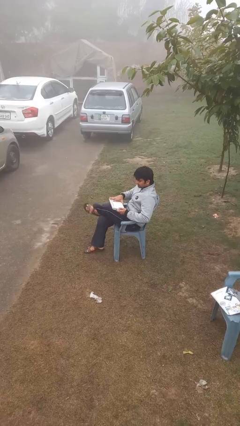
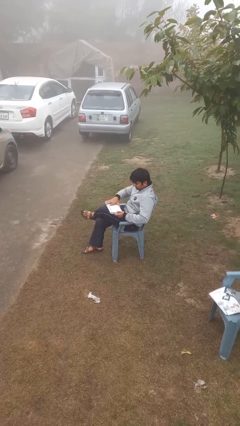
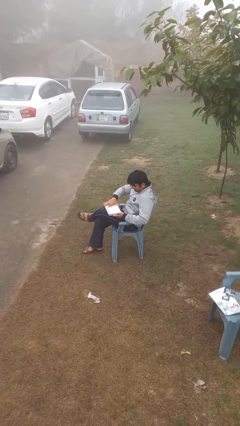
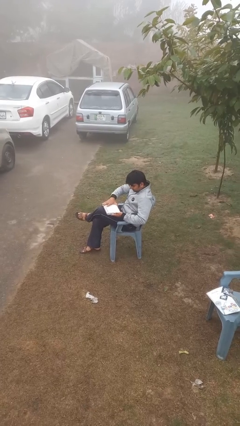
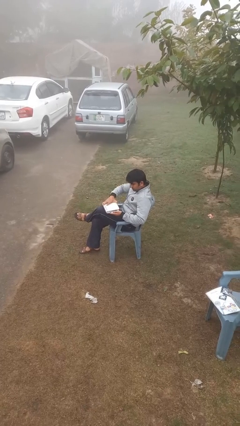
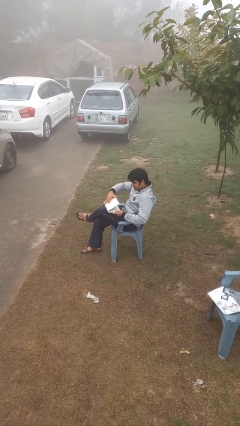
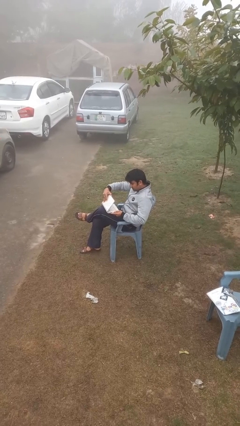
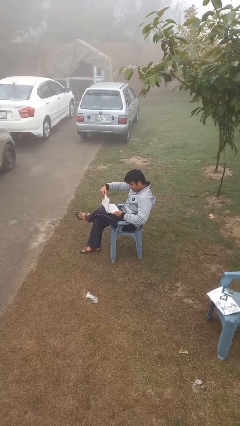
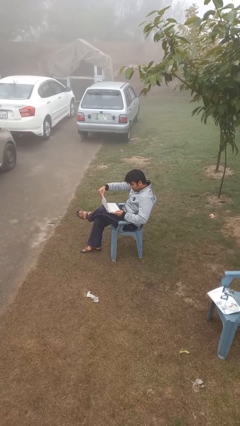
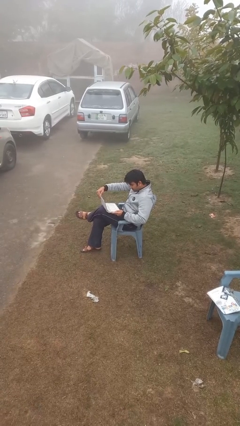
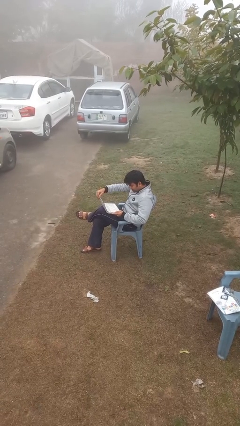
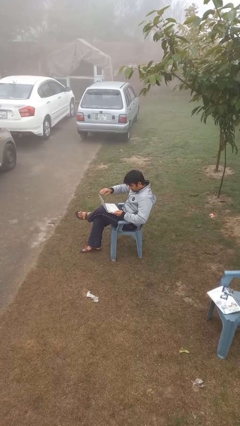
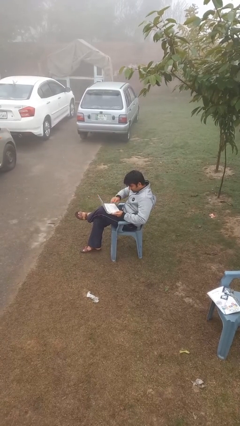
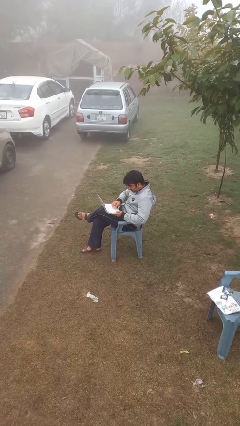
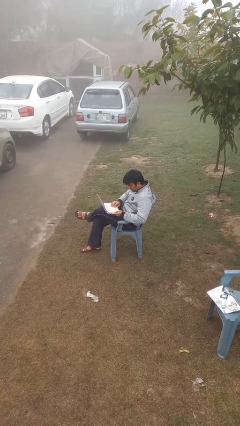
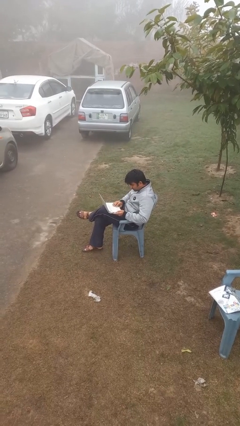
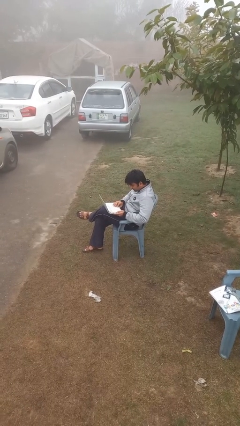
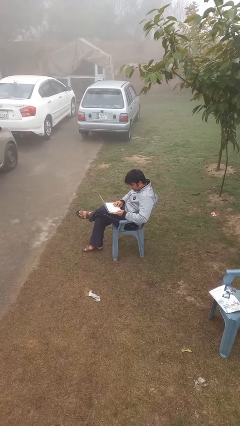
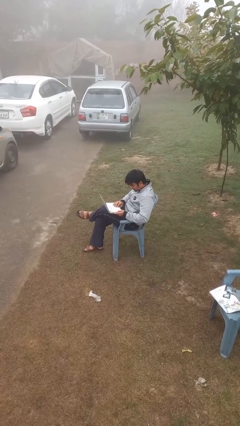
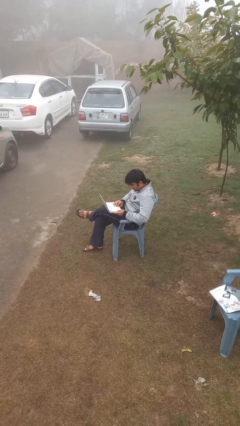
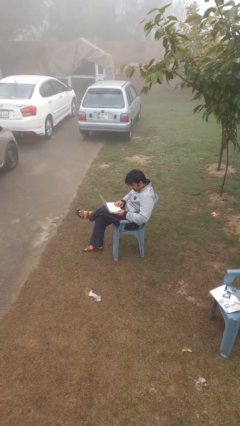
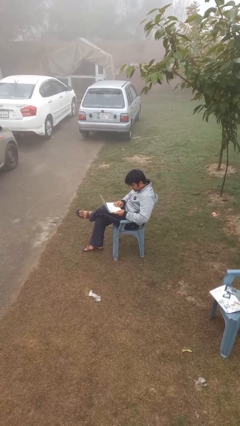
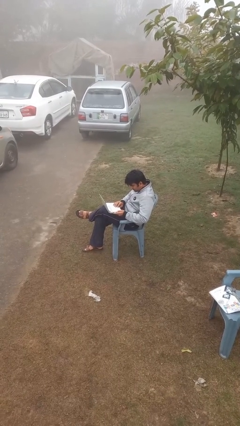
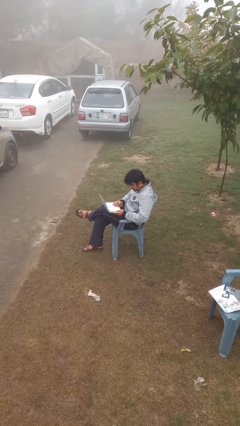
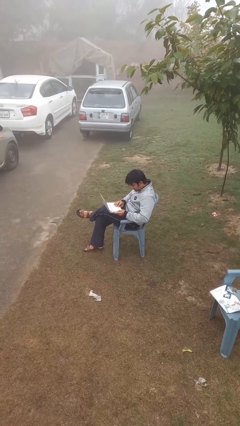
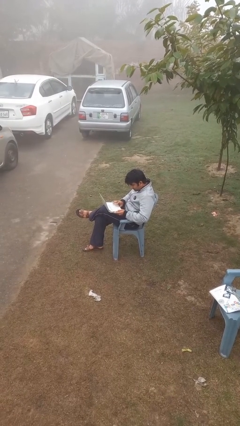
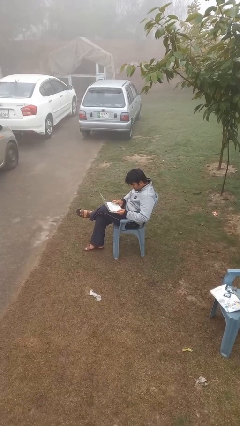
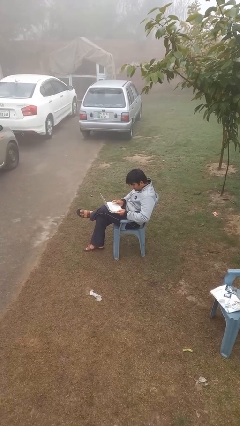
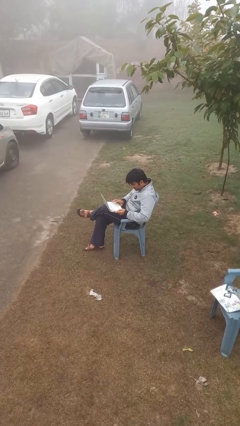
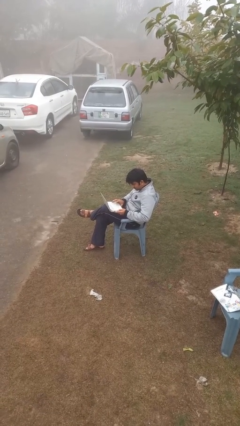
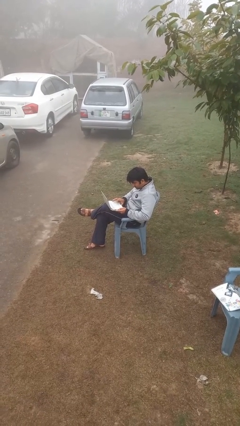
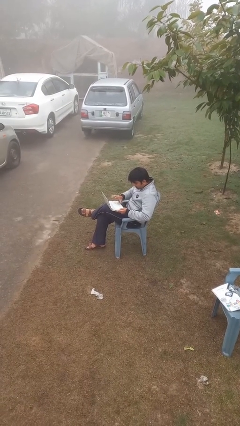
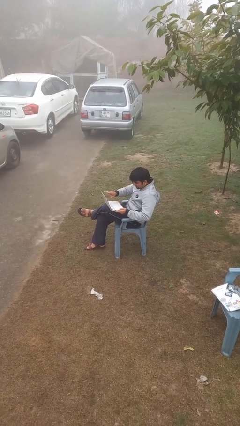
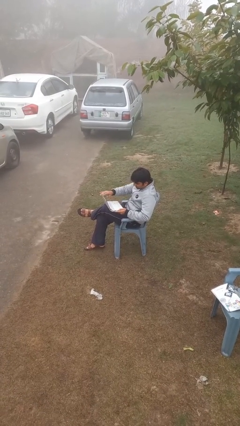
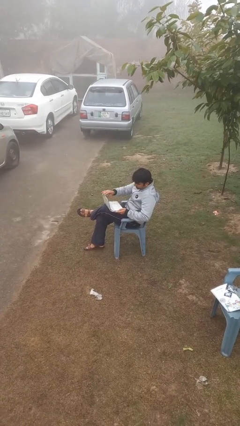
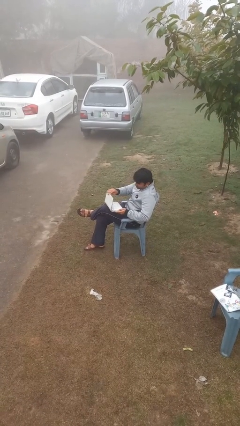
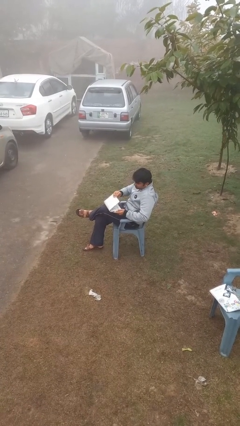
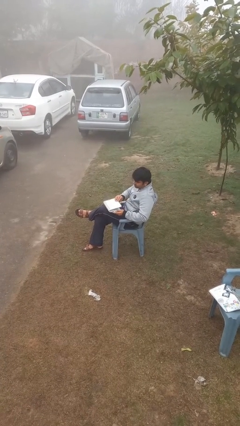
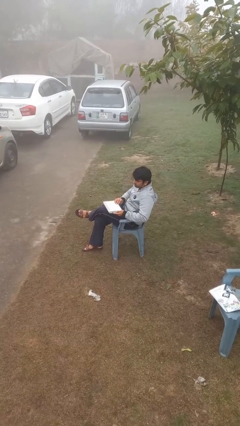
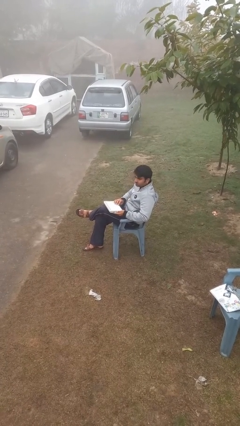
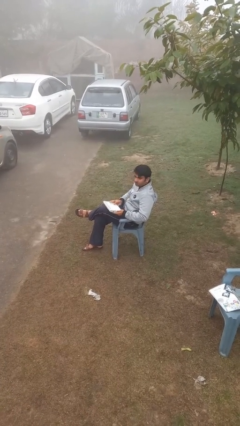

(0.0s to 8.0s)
person interacts with laptop

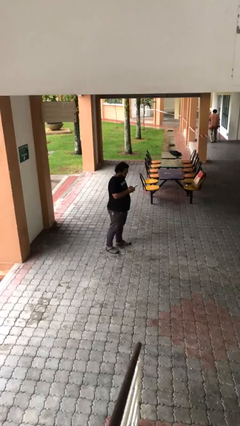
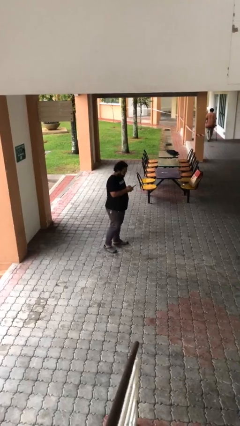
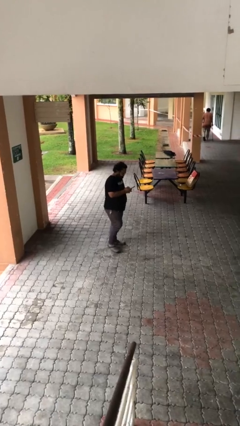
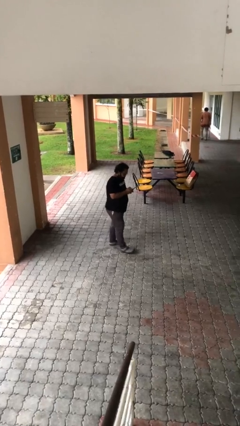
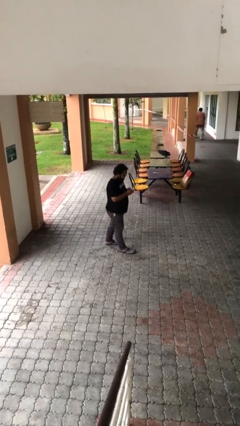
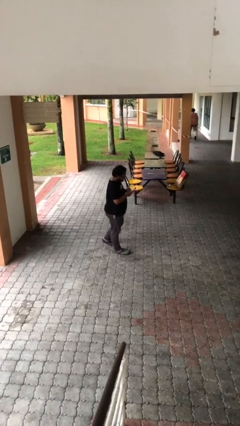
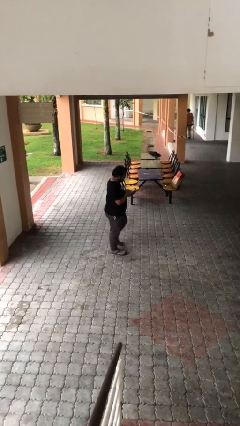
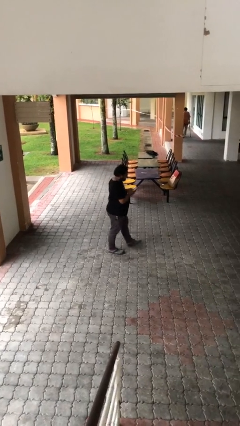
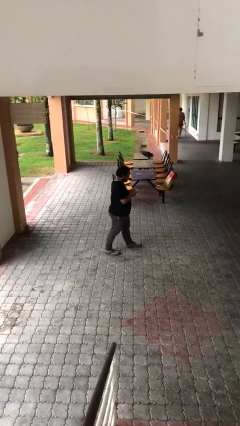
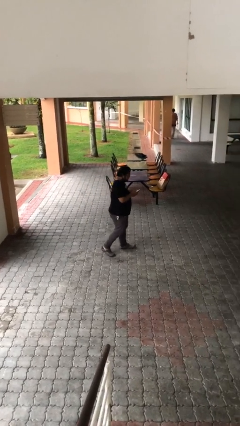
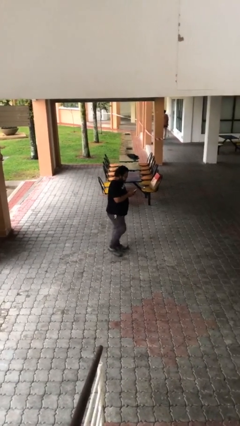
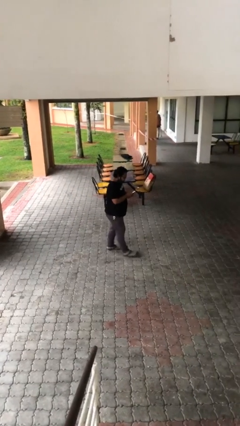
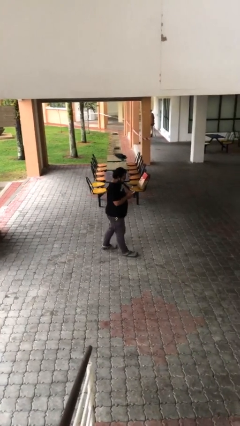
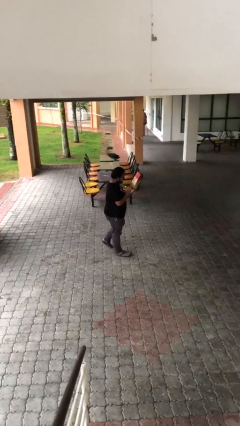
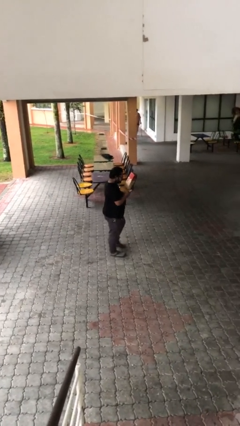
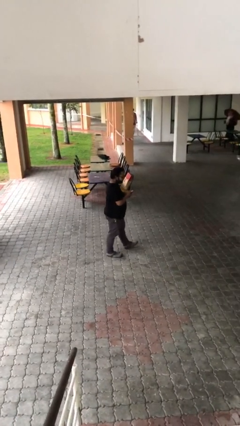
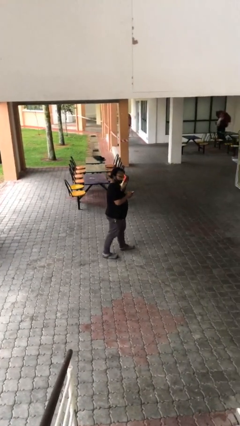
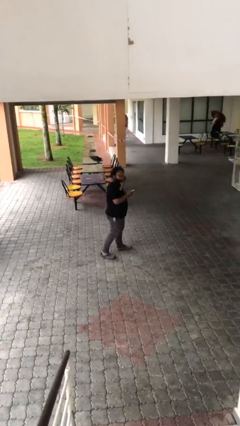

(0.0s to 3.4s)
person texts on phone

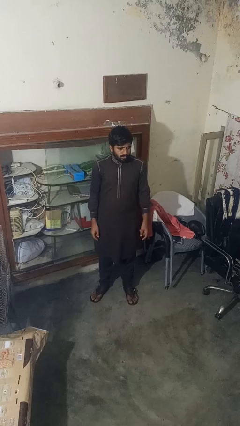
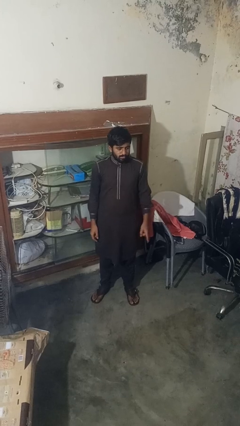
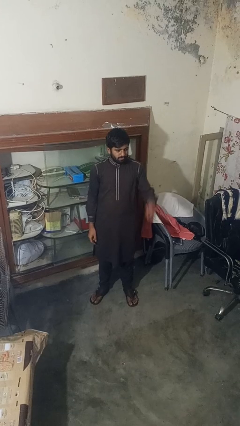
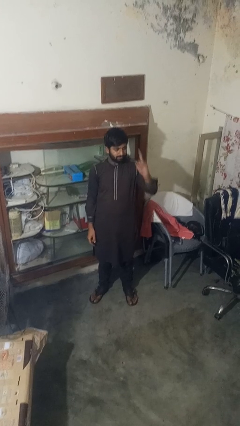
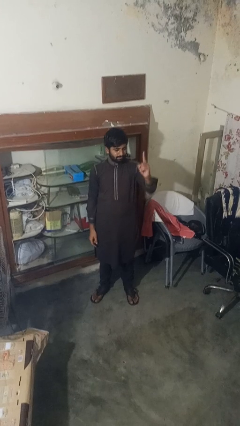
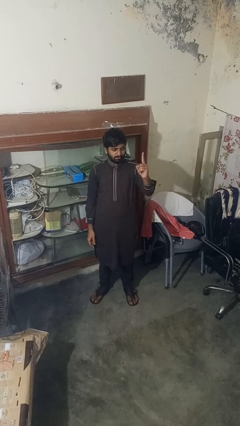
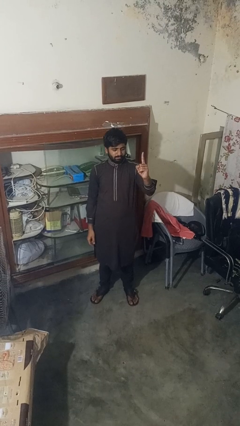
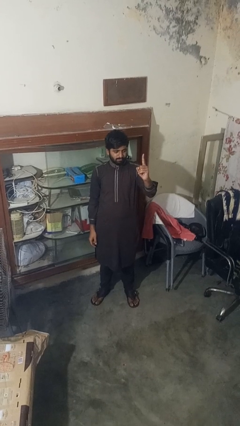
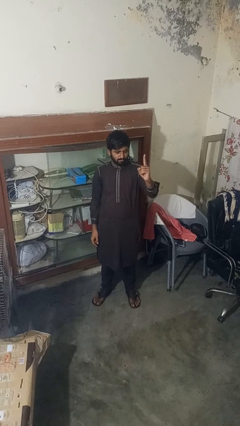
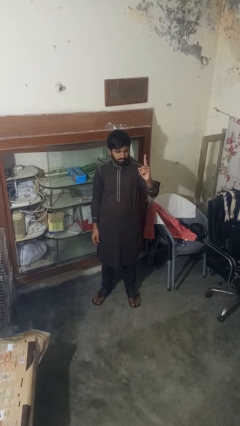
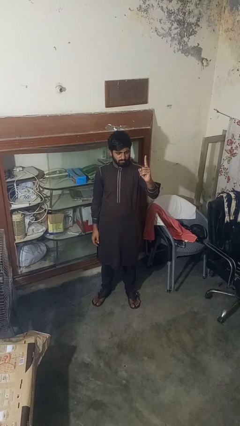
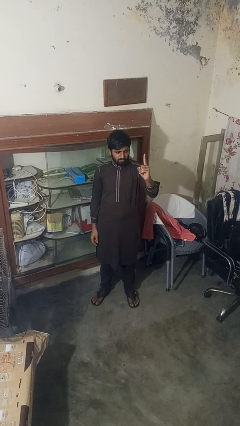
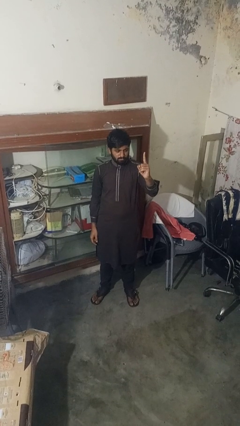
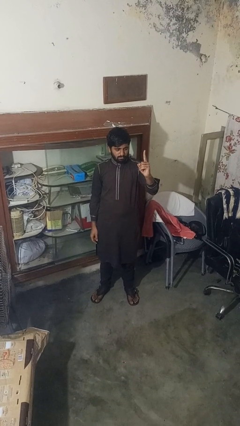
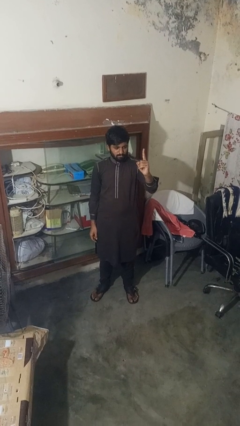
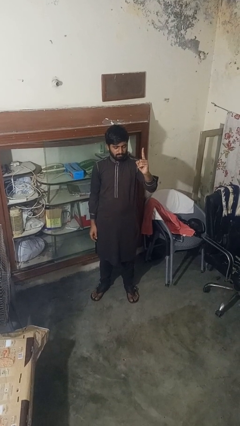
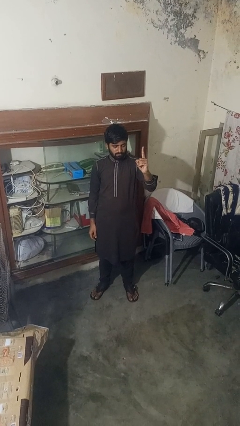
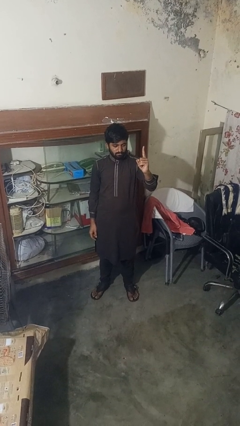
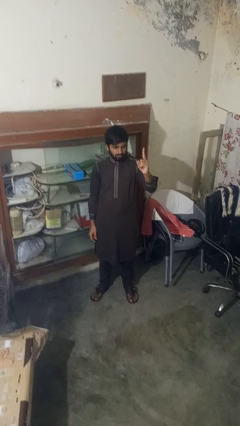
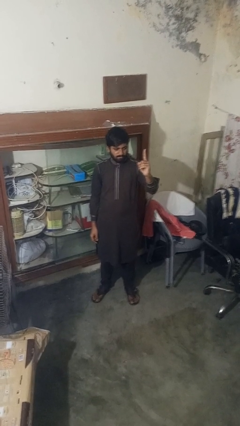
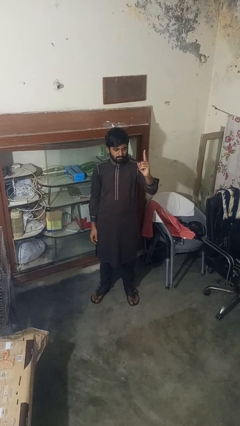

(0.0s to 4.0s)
person gestures number one

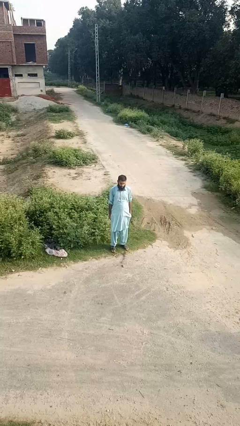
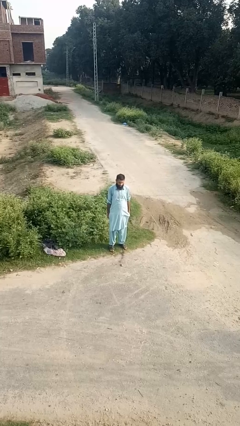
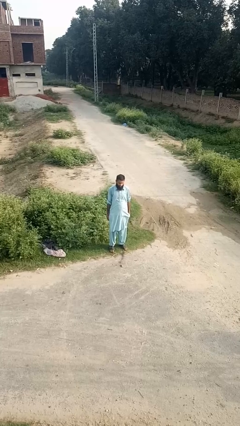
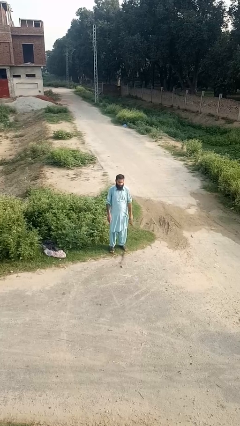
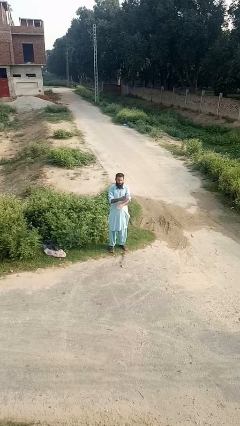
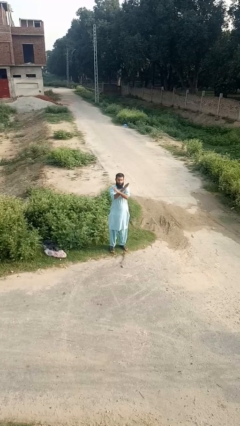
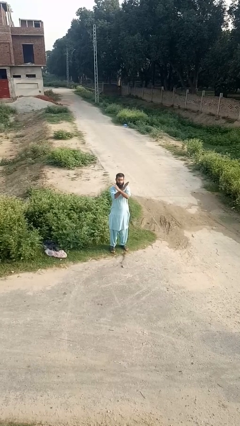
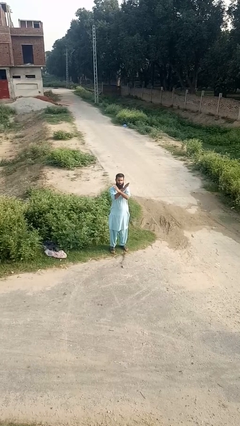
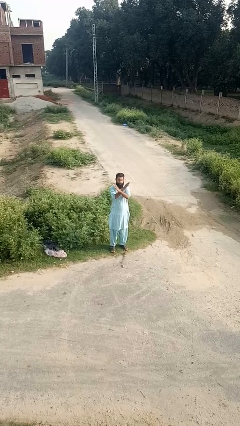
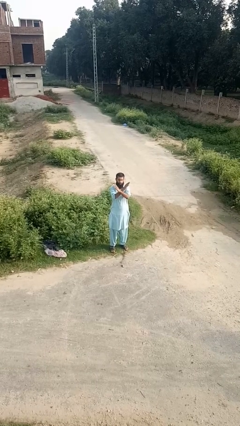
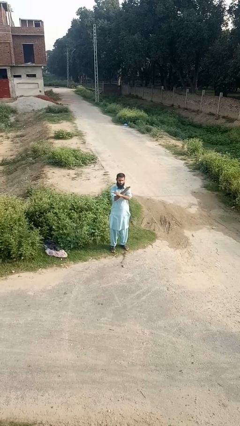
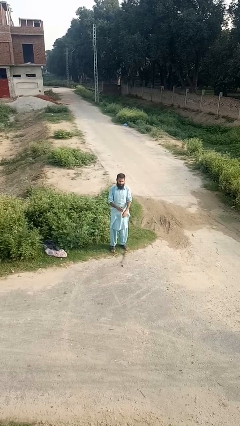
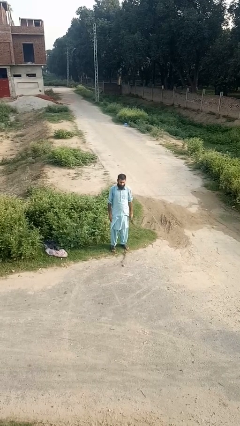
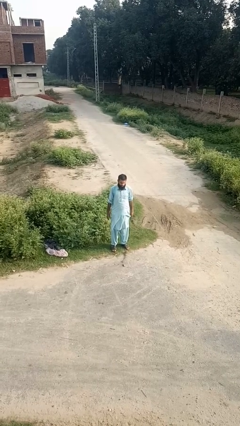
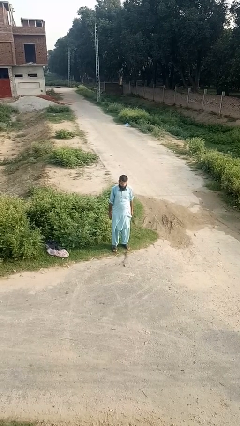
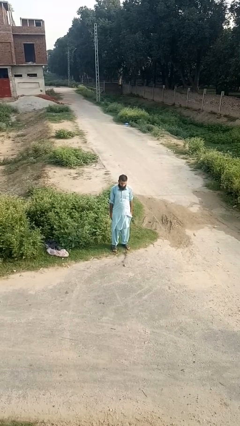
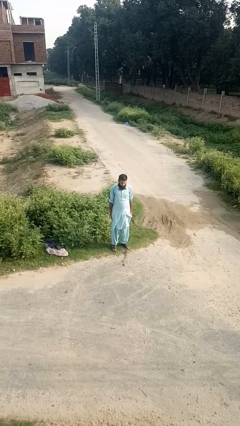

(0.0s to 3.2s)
person crosses arms
